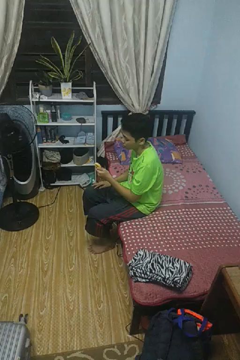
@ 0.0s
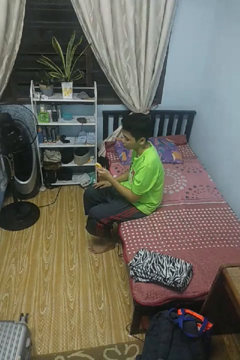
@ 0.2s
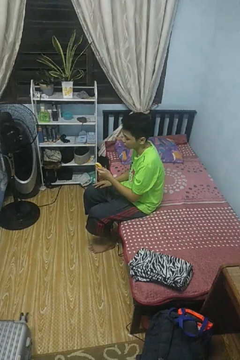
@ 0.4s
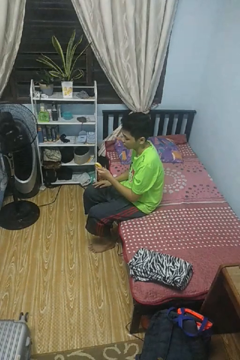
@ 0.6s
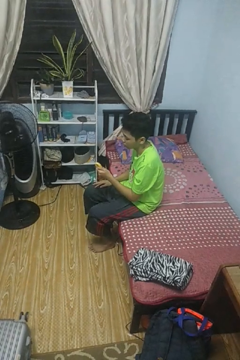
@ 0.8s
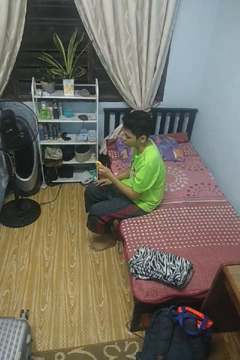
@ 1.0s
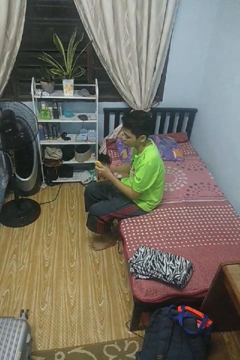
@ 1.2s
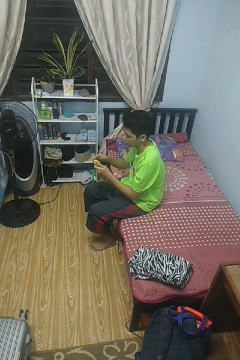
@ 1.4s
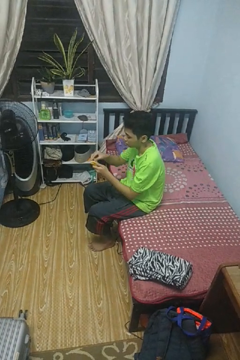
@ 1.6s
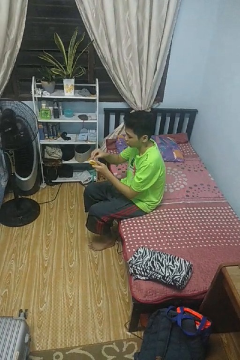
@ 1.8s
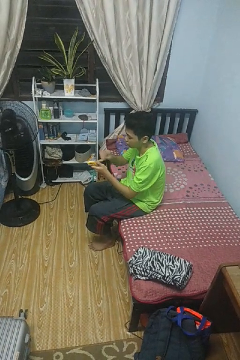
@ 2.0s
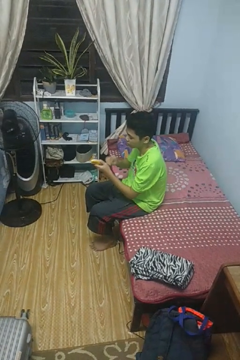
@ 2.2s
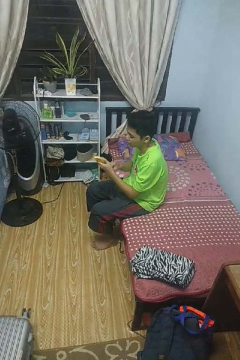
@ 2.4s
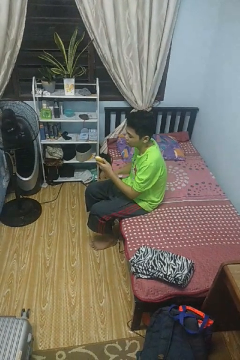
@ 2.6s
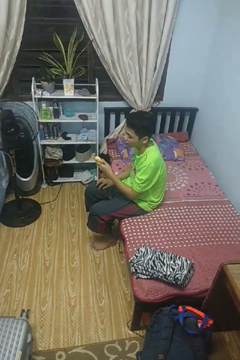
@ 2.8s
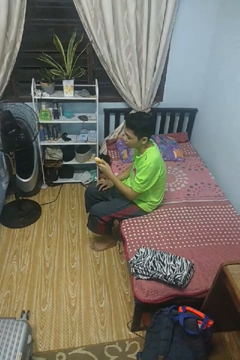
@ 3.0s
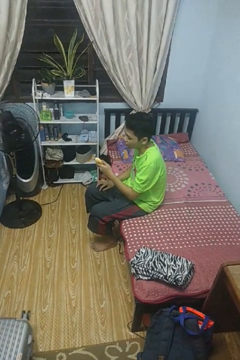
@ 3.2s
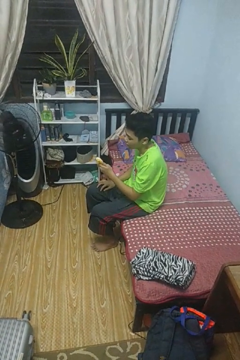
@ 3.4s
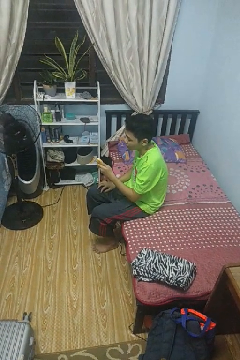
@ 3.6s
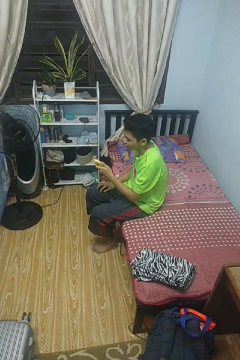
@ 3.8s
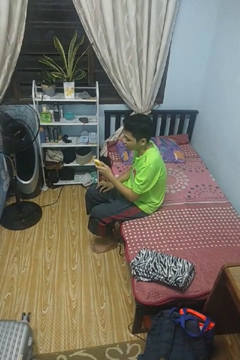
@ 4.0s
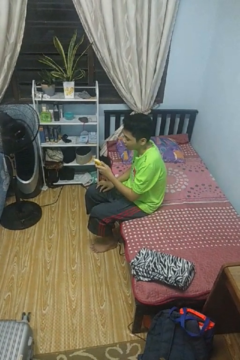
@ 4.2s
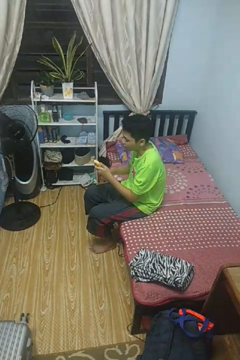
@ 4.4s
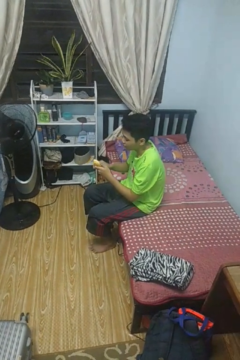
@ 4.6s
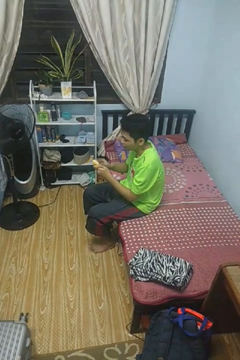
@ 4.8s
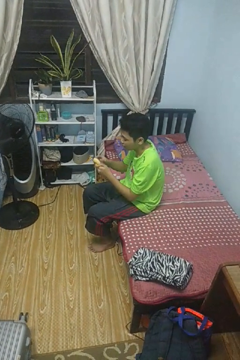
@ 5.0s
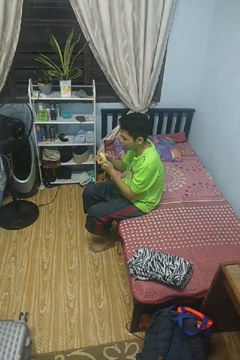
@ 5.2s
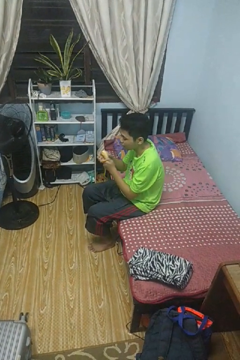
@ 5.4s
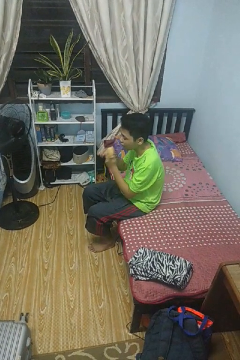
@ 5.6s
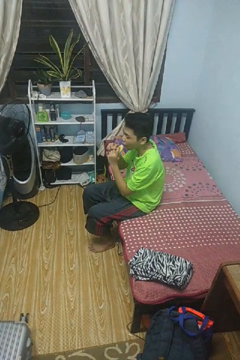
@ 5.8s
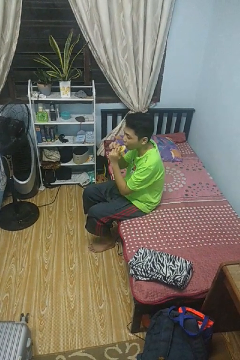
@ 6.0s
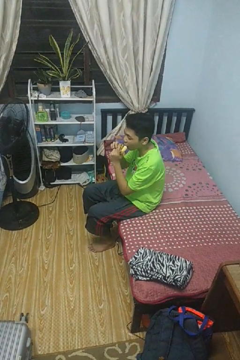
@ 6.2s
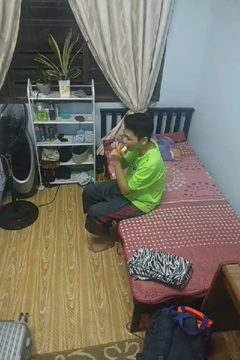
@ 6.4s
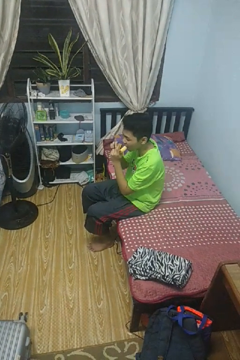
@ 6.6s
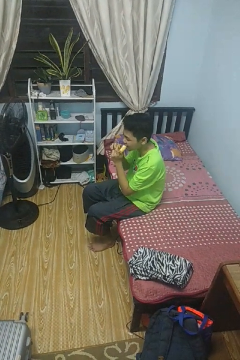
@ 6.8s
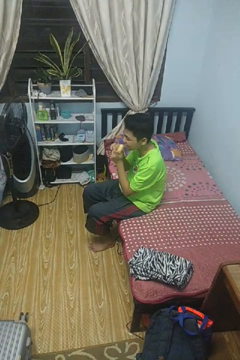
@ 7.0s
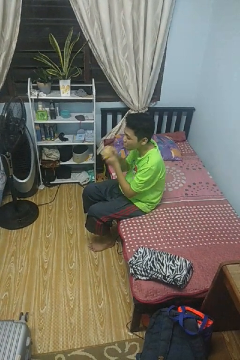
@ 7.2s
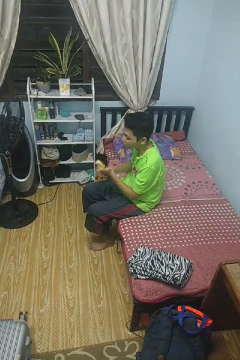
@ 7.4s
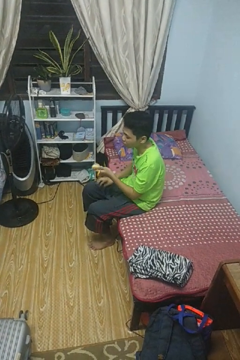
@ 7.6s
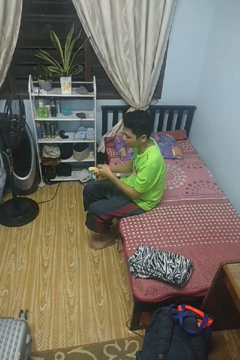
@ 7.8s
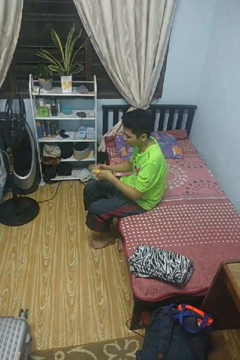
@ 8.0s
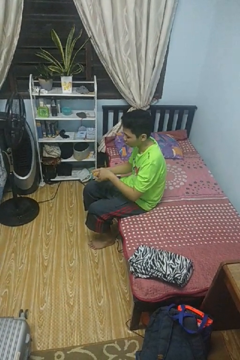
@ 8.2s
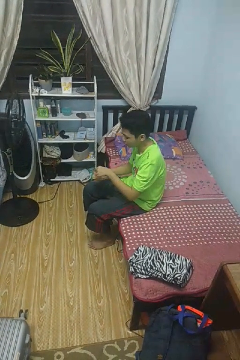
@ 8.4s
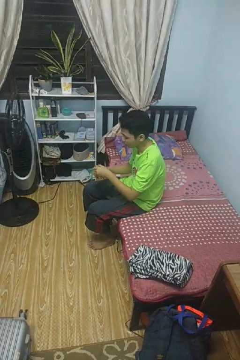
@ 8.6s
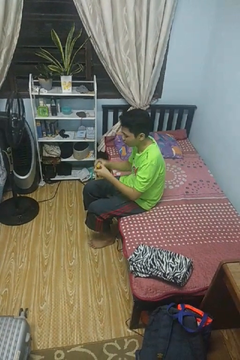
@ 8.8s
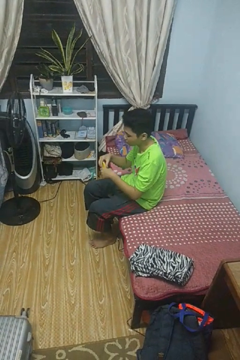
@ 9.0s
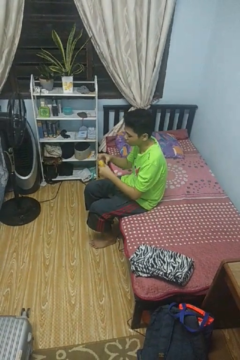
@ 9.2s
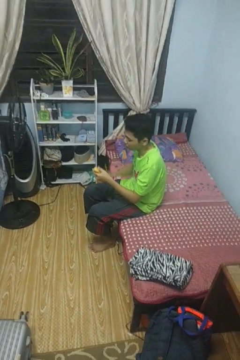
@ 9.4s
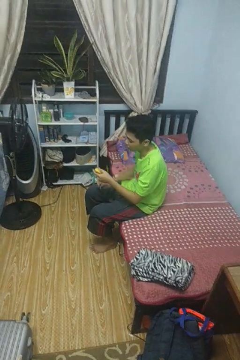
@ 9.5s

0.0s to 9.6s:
person eats banana

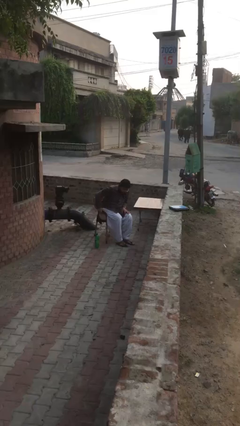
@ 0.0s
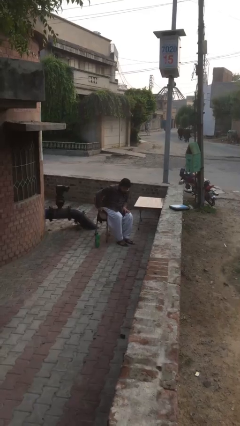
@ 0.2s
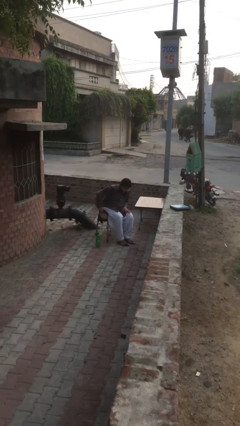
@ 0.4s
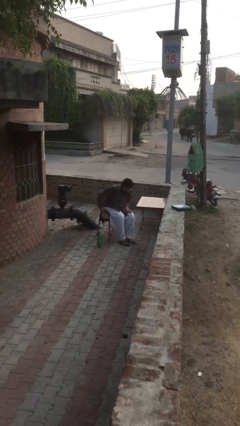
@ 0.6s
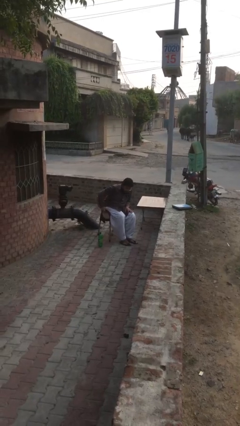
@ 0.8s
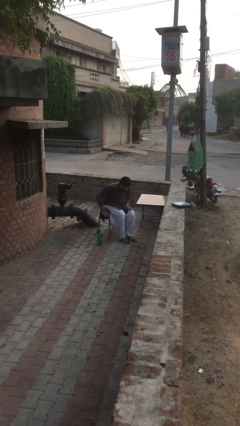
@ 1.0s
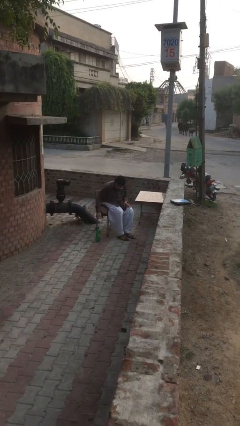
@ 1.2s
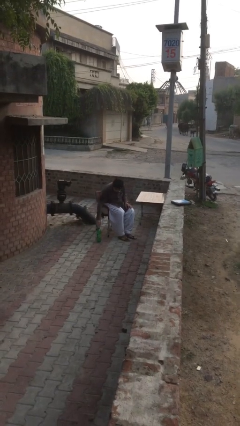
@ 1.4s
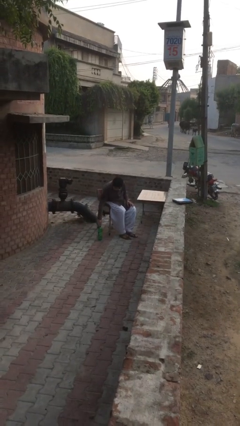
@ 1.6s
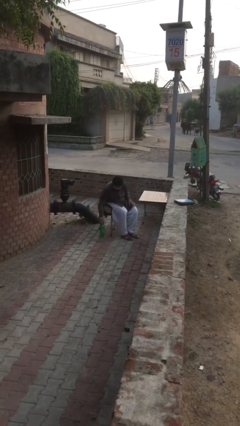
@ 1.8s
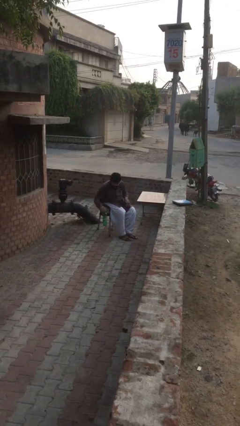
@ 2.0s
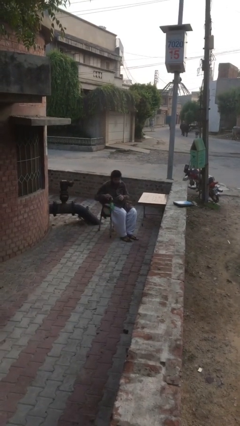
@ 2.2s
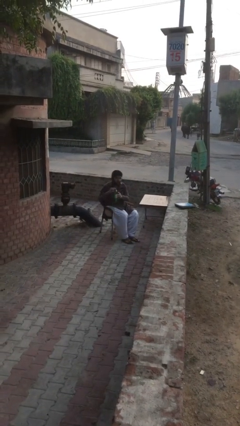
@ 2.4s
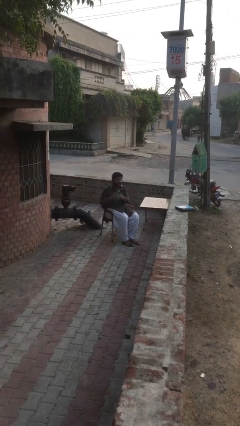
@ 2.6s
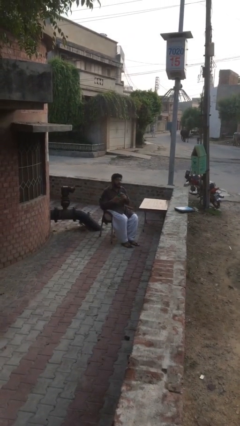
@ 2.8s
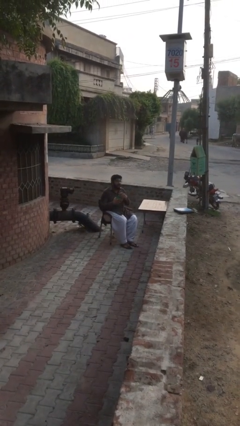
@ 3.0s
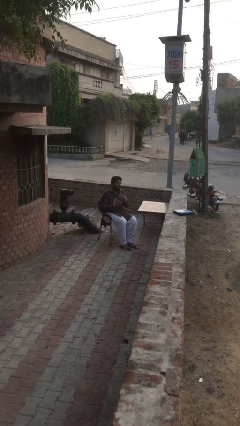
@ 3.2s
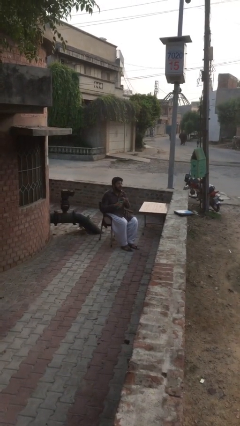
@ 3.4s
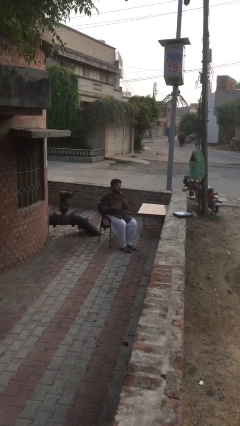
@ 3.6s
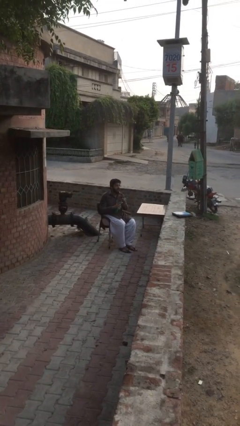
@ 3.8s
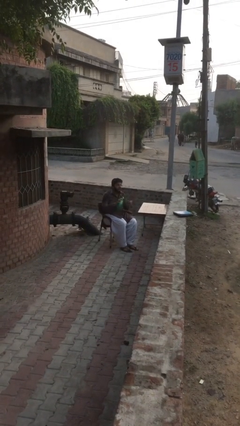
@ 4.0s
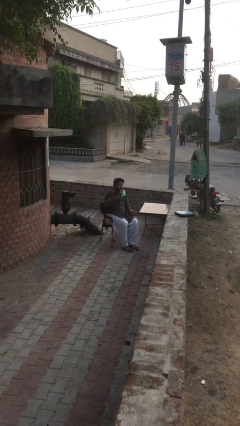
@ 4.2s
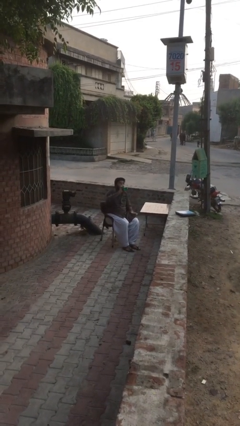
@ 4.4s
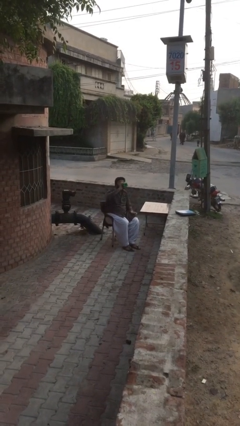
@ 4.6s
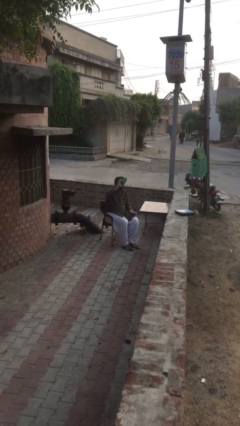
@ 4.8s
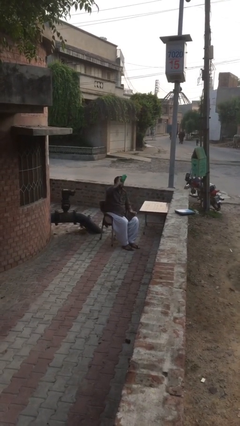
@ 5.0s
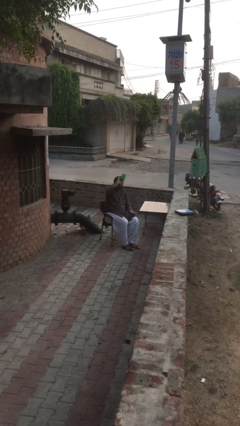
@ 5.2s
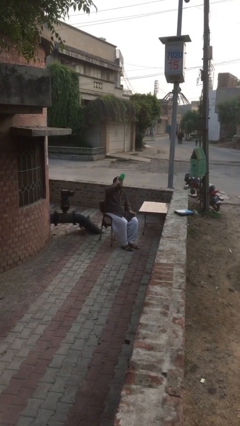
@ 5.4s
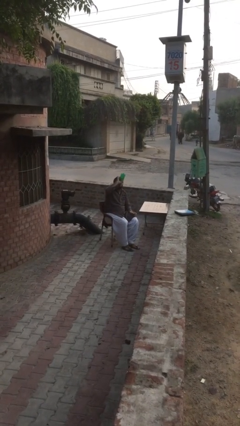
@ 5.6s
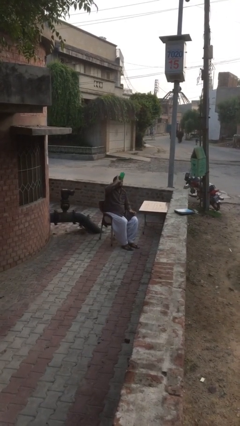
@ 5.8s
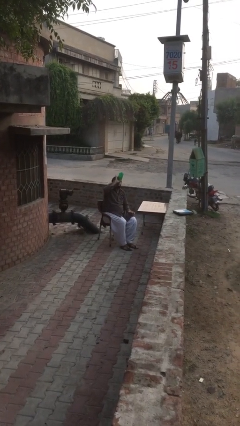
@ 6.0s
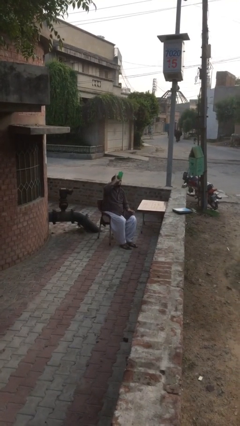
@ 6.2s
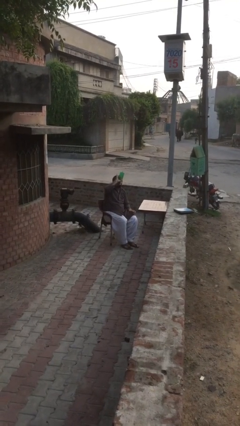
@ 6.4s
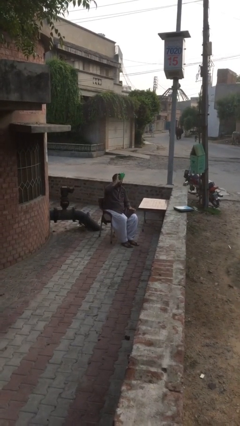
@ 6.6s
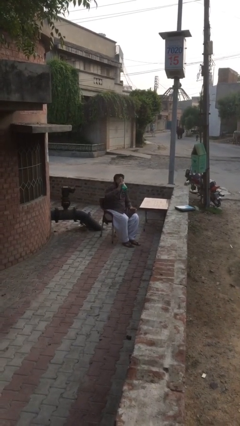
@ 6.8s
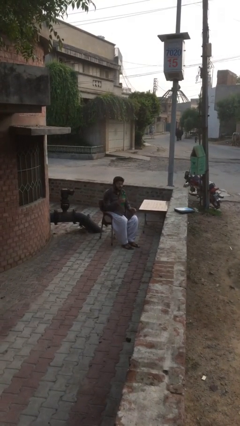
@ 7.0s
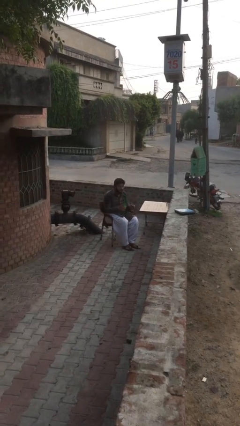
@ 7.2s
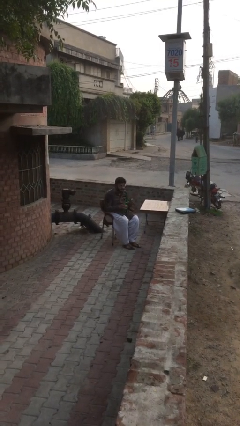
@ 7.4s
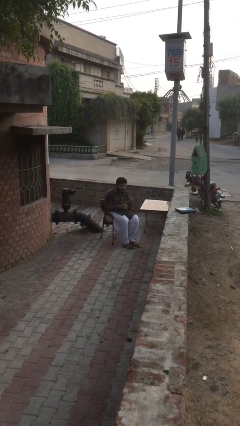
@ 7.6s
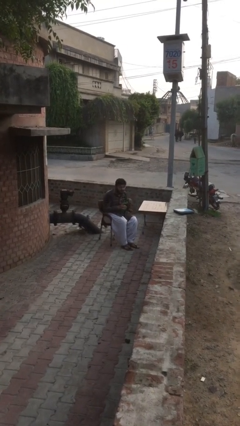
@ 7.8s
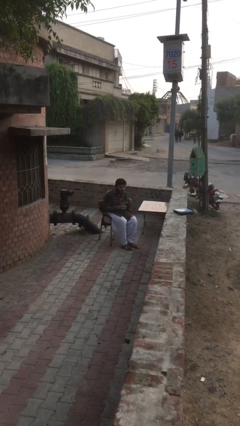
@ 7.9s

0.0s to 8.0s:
person picks up object from floor

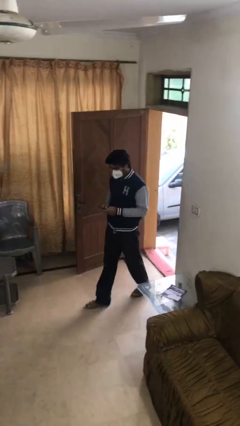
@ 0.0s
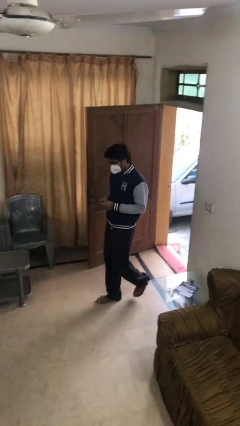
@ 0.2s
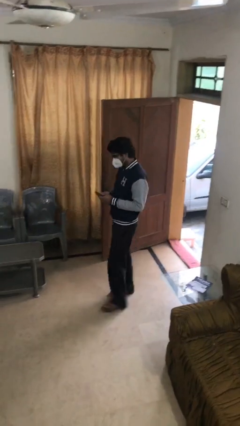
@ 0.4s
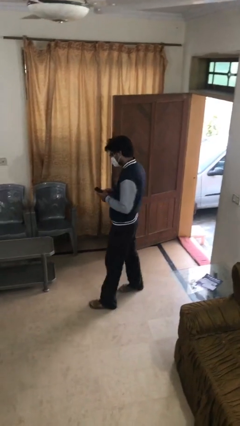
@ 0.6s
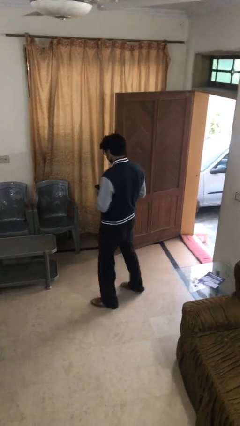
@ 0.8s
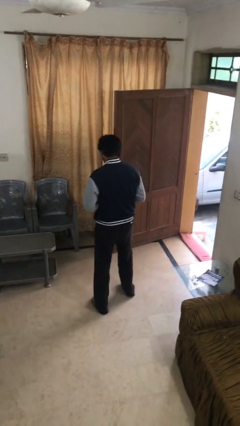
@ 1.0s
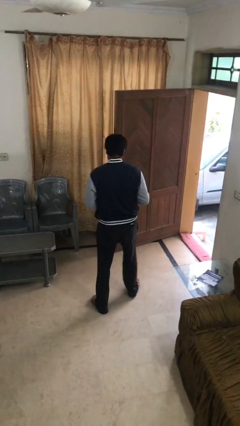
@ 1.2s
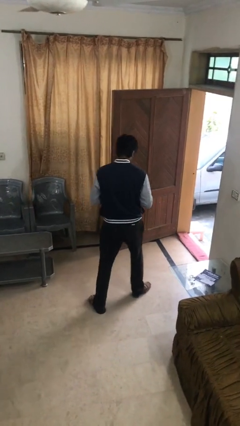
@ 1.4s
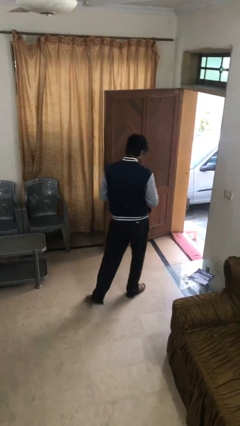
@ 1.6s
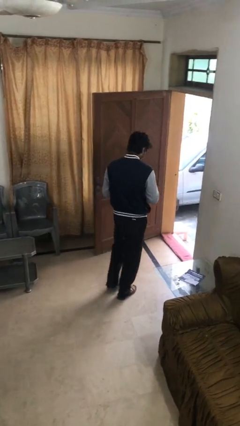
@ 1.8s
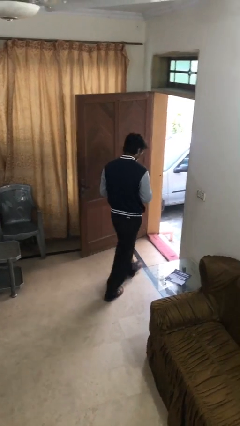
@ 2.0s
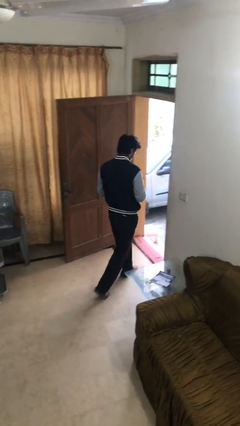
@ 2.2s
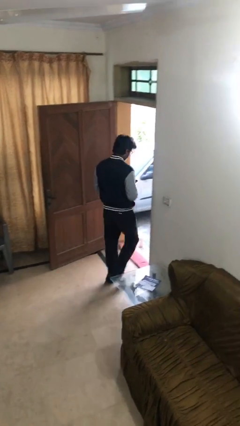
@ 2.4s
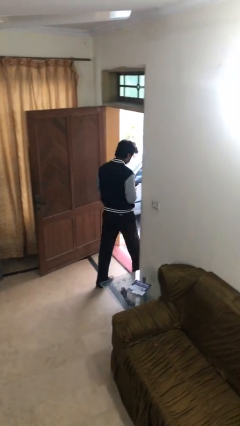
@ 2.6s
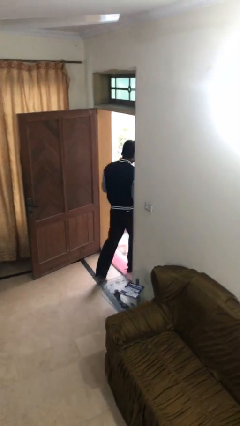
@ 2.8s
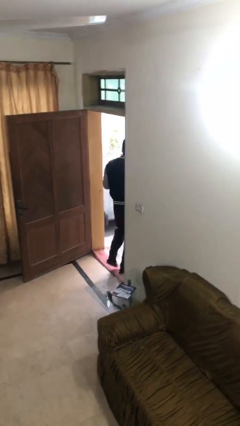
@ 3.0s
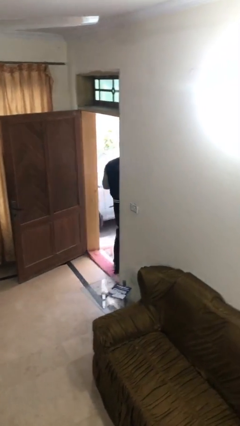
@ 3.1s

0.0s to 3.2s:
person exits scene through structure
